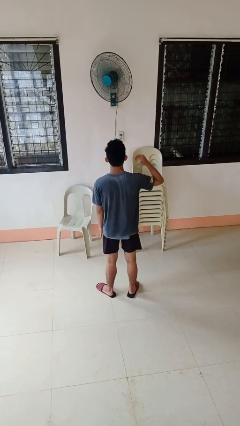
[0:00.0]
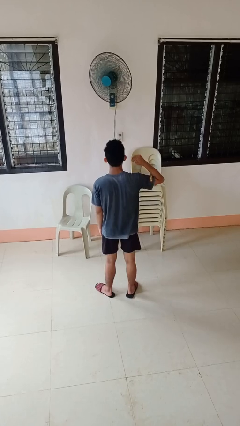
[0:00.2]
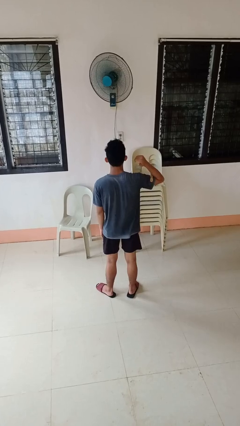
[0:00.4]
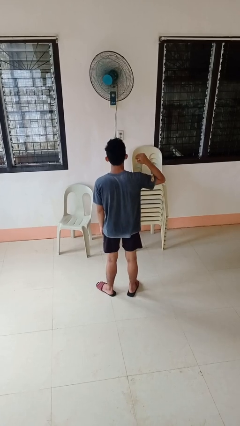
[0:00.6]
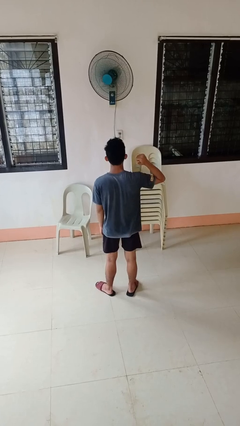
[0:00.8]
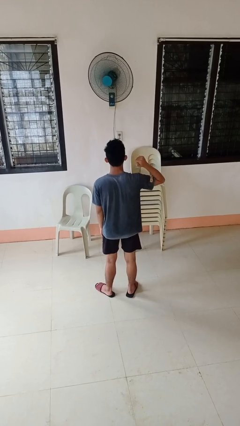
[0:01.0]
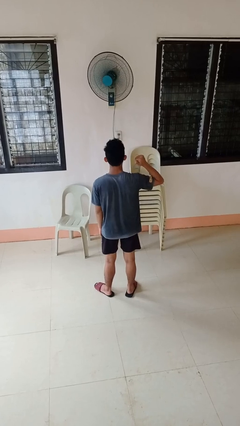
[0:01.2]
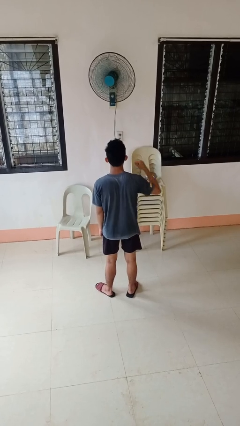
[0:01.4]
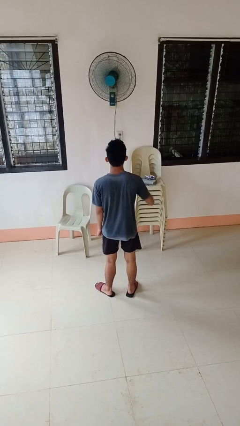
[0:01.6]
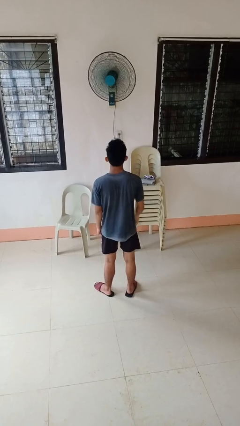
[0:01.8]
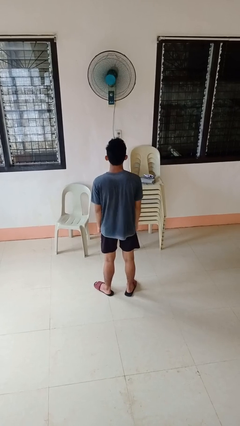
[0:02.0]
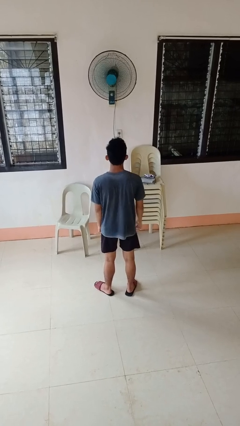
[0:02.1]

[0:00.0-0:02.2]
person gestures behind me

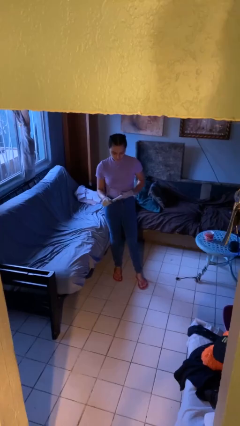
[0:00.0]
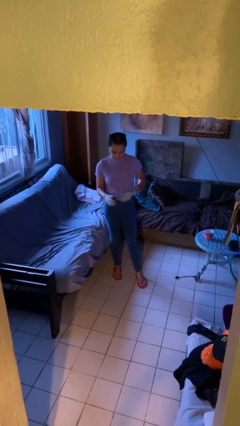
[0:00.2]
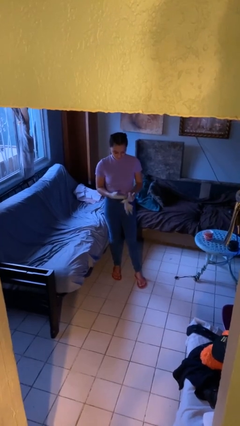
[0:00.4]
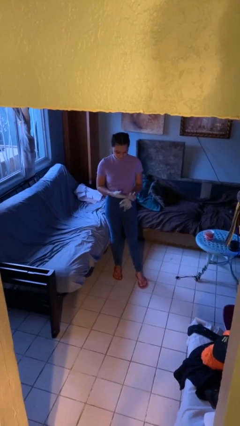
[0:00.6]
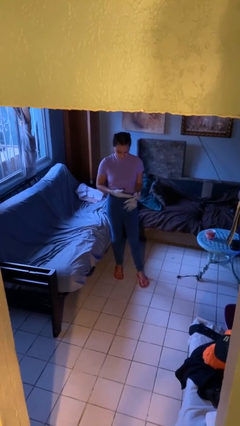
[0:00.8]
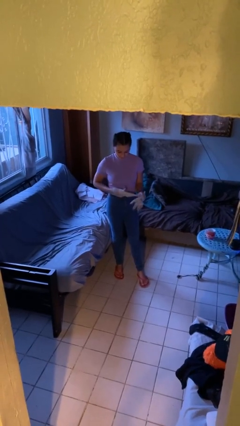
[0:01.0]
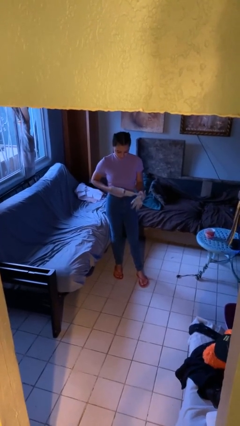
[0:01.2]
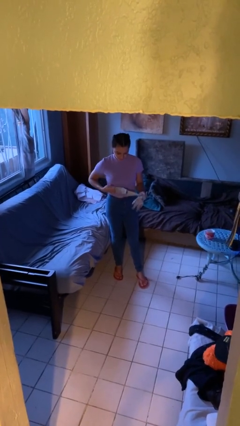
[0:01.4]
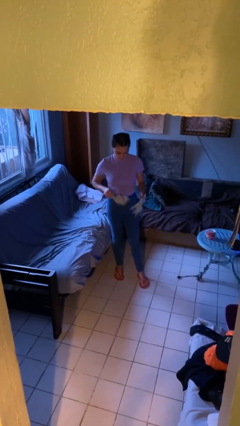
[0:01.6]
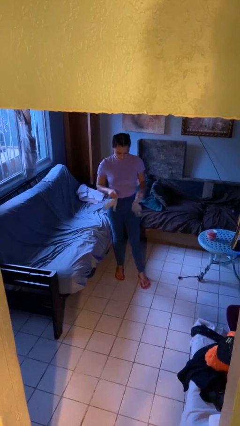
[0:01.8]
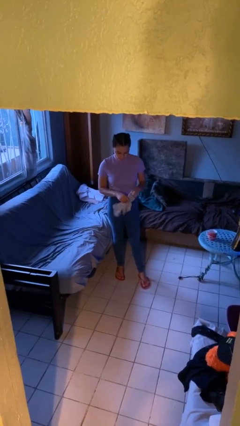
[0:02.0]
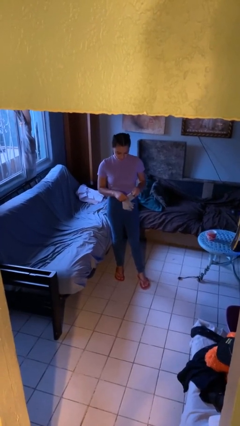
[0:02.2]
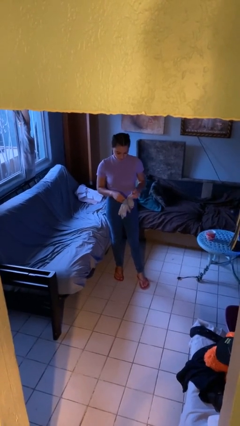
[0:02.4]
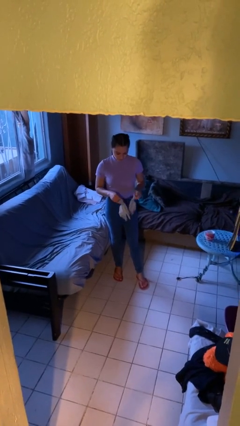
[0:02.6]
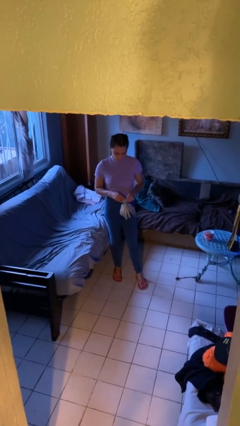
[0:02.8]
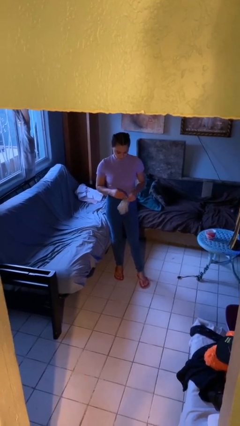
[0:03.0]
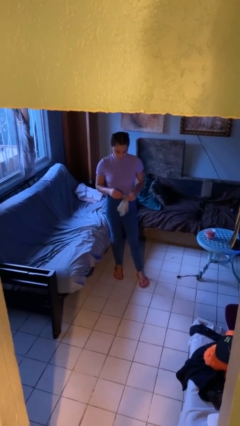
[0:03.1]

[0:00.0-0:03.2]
person takes off gloves

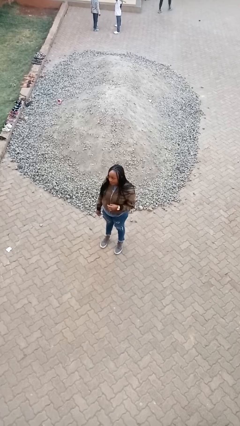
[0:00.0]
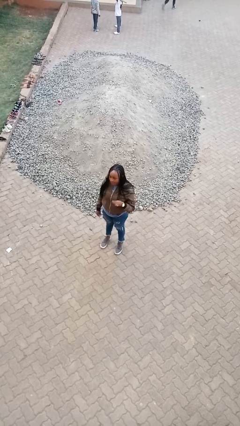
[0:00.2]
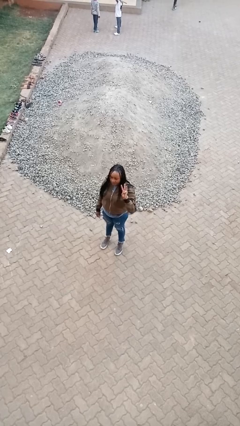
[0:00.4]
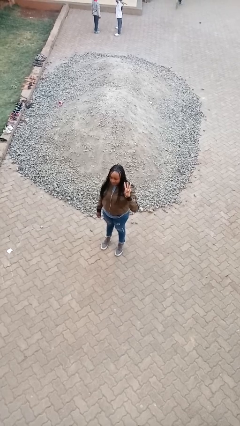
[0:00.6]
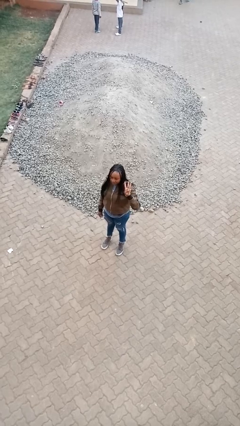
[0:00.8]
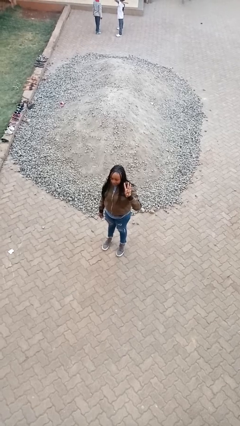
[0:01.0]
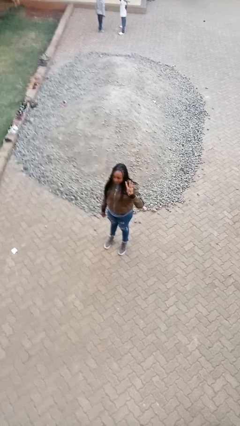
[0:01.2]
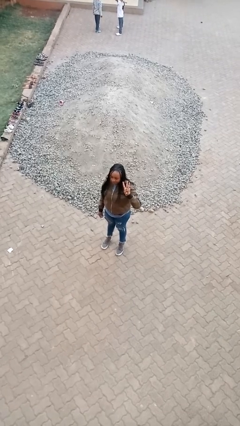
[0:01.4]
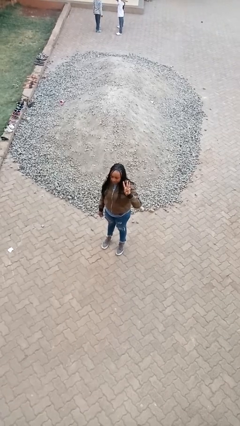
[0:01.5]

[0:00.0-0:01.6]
person gestures number three

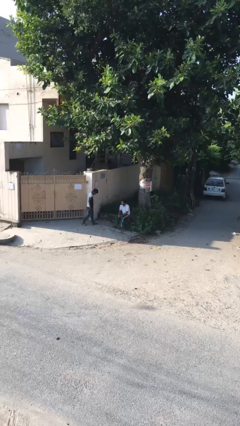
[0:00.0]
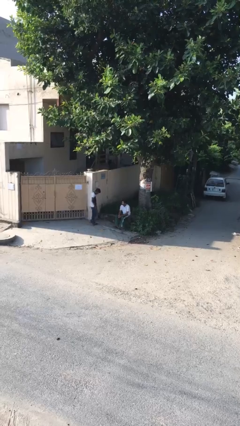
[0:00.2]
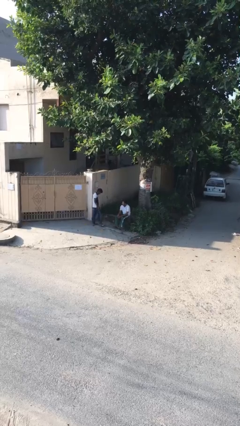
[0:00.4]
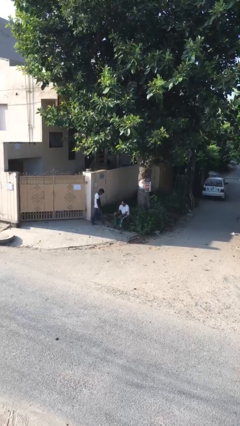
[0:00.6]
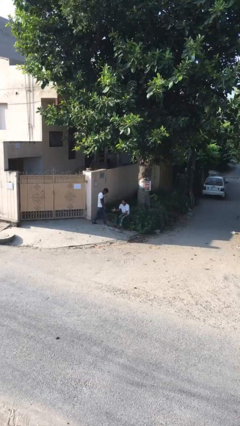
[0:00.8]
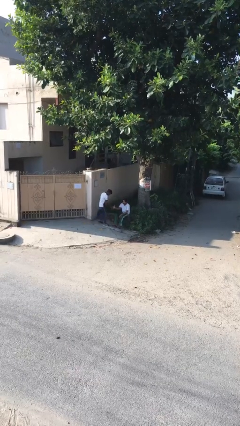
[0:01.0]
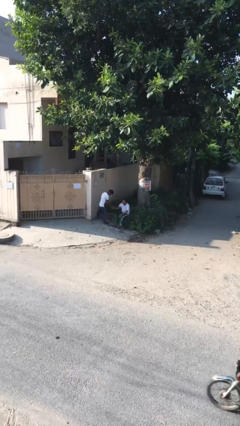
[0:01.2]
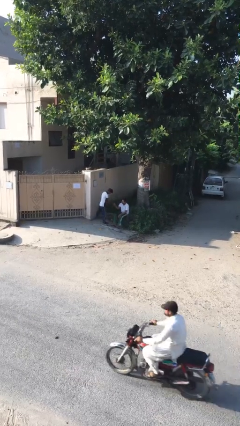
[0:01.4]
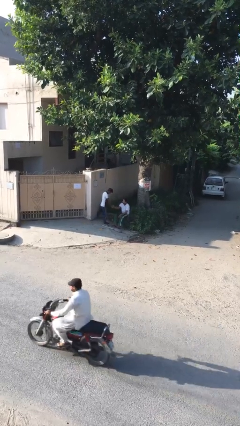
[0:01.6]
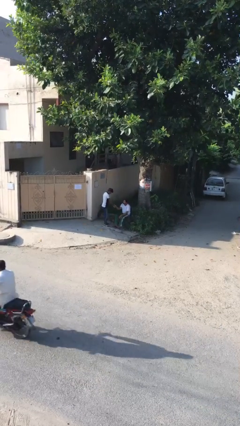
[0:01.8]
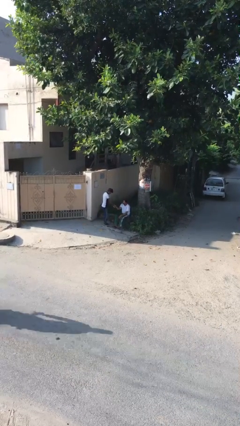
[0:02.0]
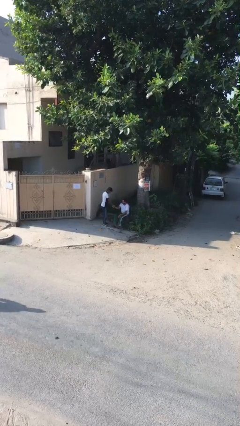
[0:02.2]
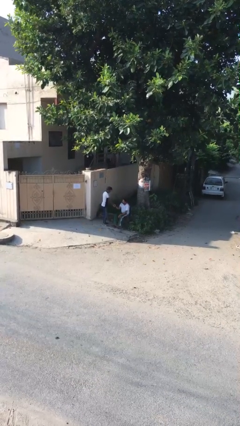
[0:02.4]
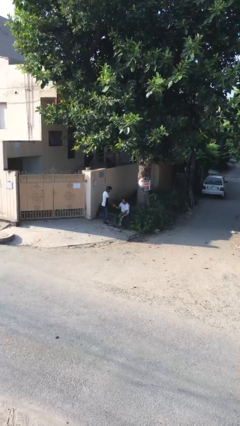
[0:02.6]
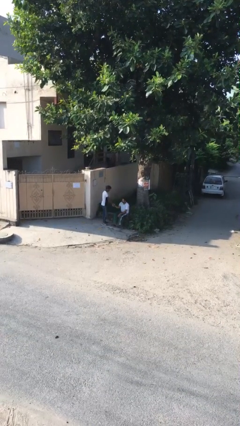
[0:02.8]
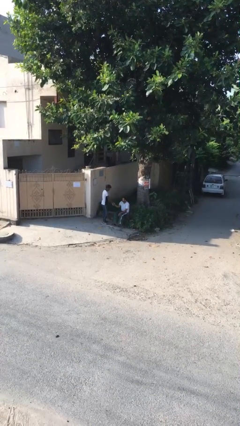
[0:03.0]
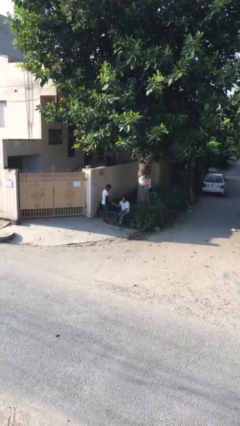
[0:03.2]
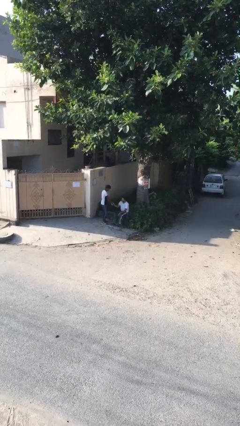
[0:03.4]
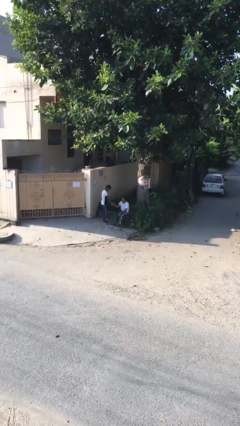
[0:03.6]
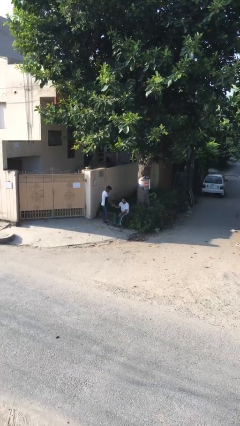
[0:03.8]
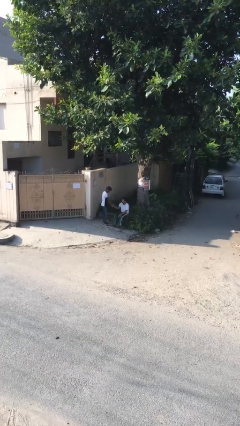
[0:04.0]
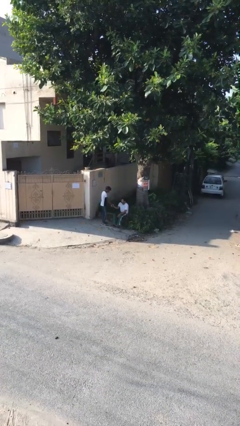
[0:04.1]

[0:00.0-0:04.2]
person shakes hand

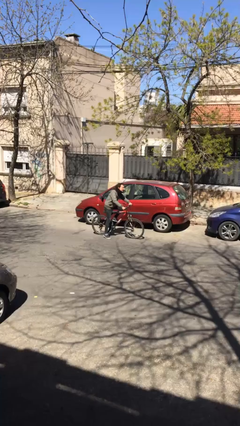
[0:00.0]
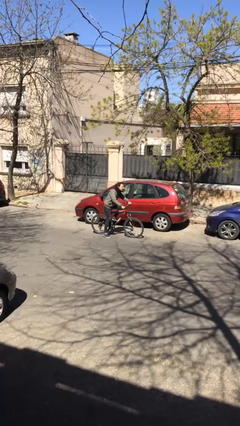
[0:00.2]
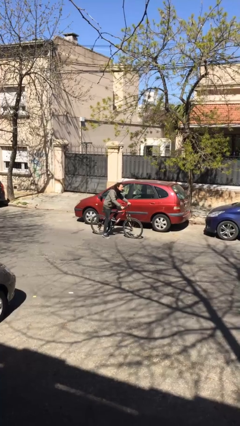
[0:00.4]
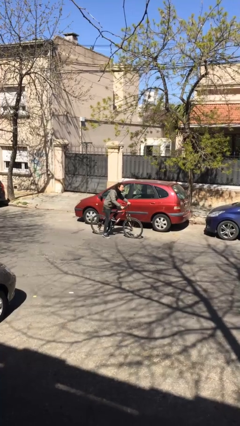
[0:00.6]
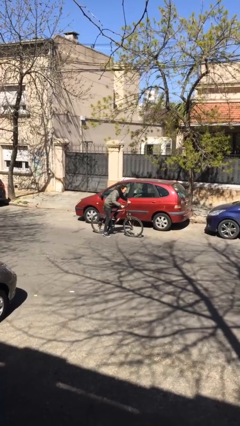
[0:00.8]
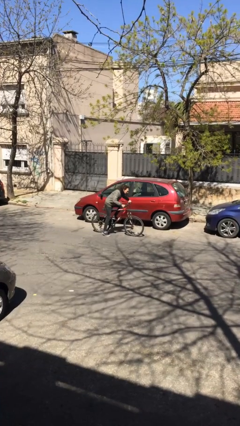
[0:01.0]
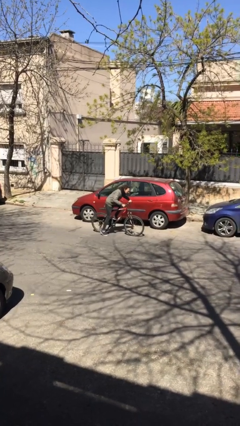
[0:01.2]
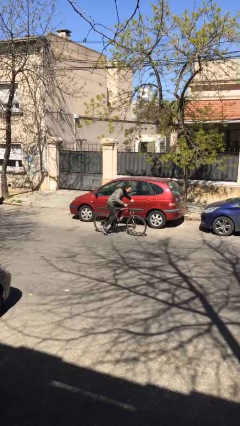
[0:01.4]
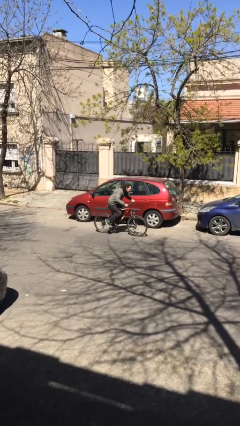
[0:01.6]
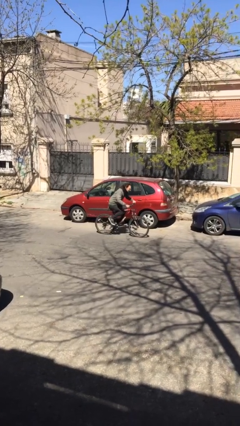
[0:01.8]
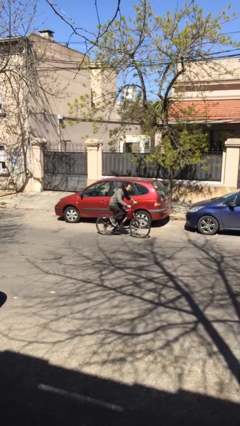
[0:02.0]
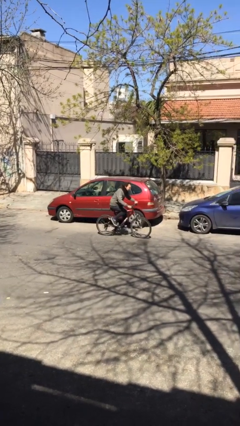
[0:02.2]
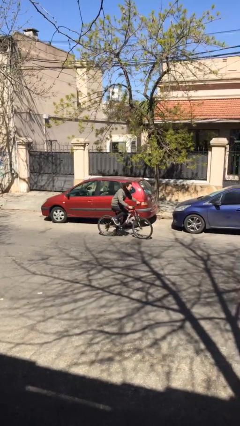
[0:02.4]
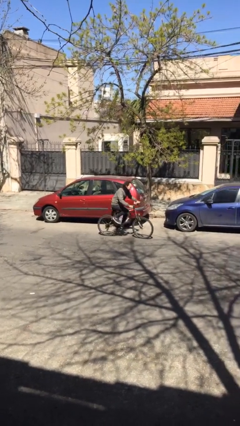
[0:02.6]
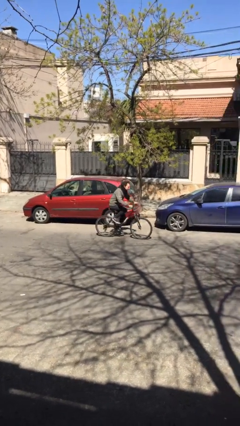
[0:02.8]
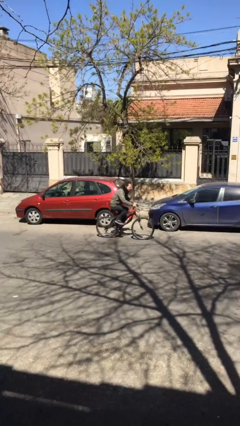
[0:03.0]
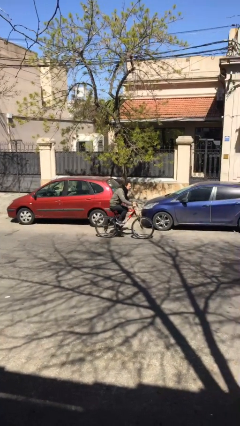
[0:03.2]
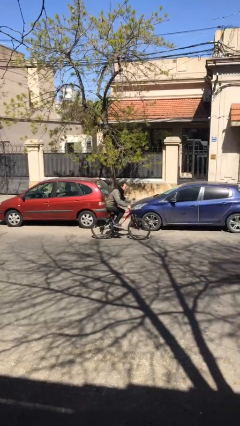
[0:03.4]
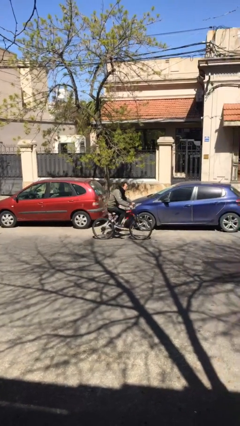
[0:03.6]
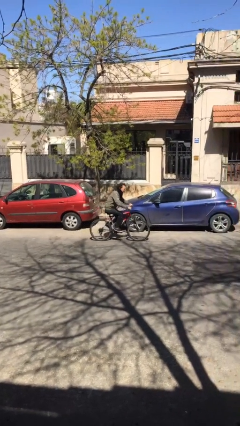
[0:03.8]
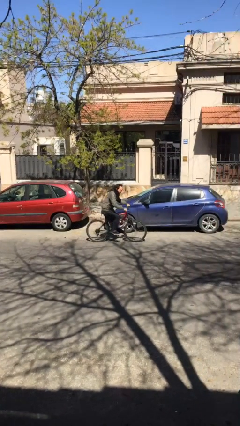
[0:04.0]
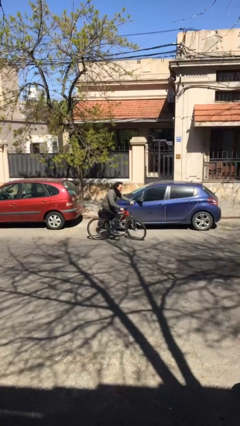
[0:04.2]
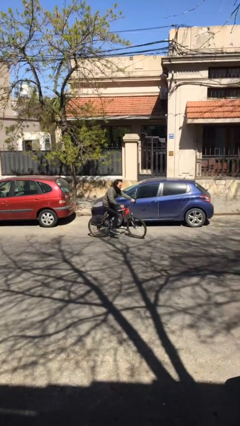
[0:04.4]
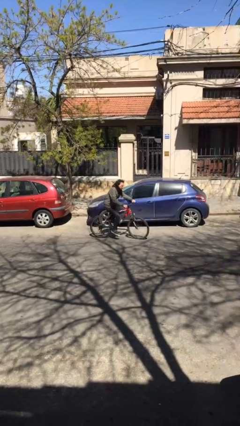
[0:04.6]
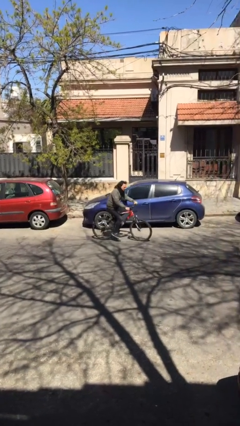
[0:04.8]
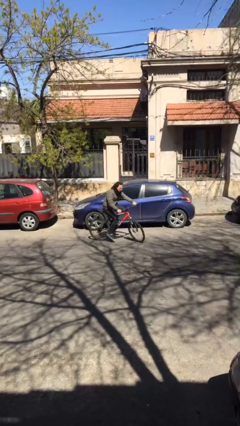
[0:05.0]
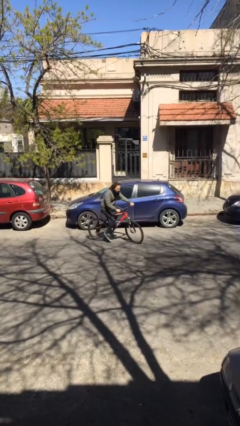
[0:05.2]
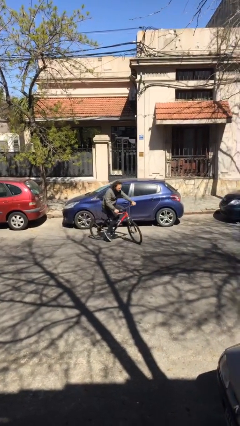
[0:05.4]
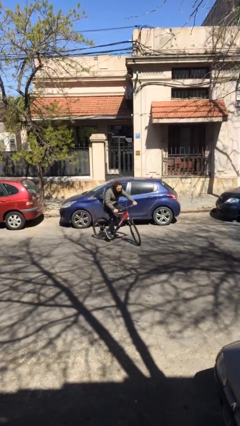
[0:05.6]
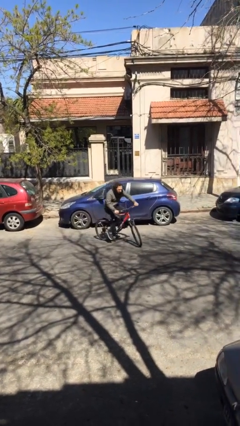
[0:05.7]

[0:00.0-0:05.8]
person rides bicycle

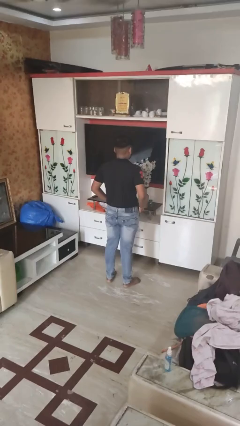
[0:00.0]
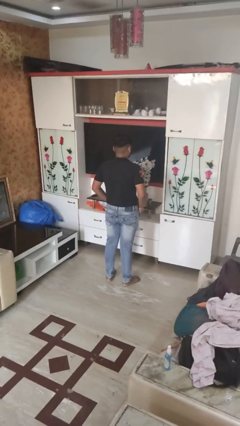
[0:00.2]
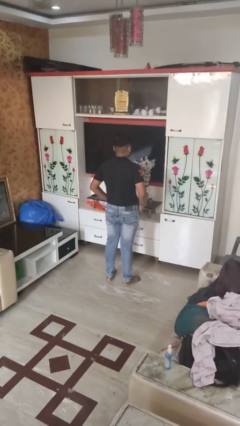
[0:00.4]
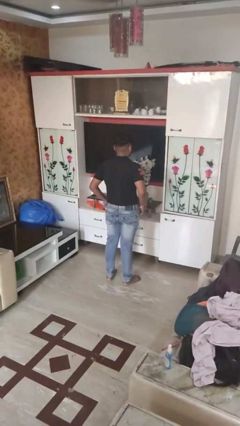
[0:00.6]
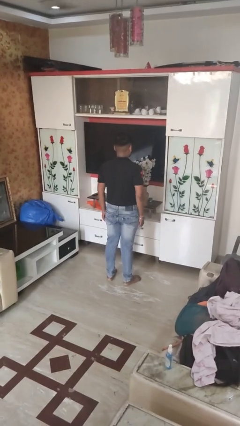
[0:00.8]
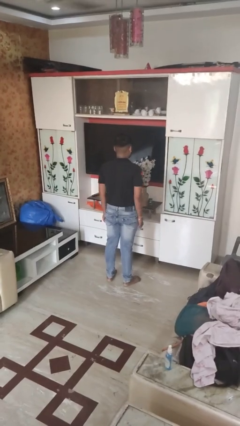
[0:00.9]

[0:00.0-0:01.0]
person puts hands in back pockets
